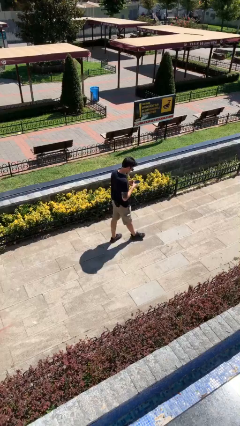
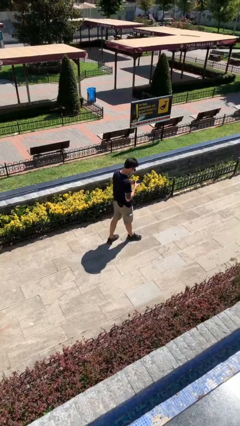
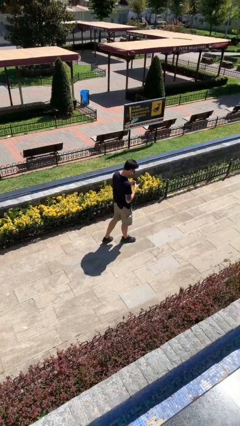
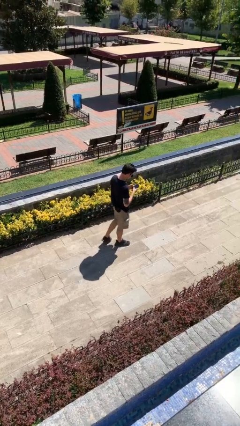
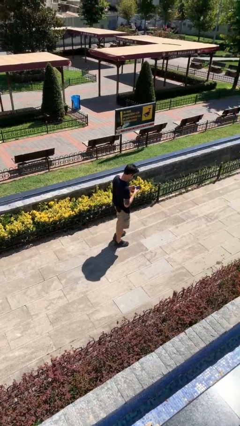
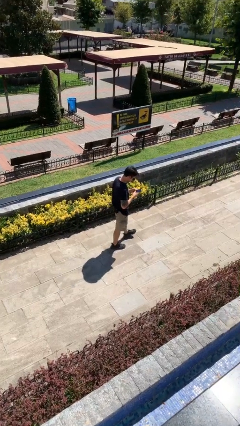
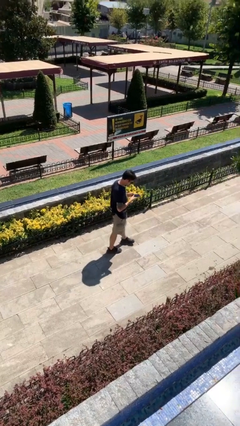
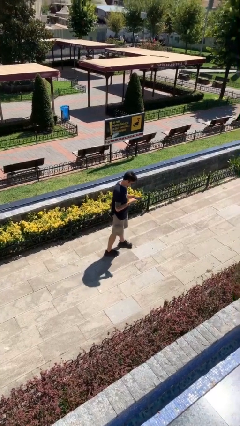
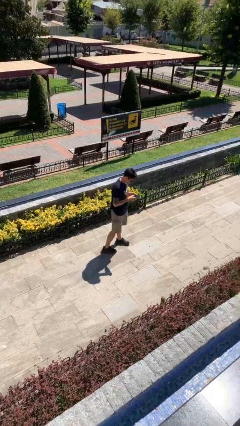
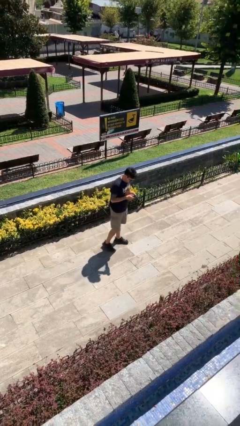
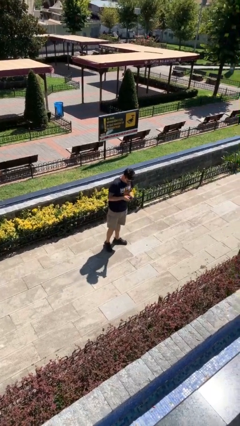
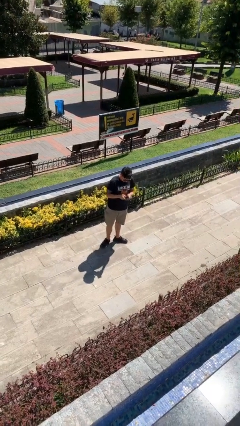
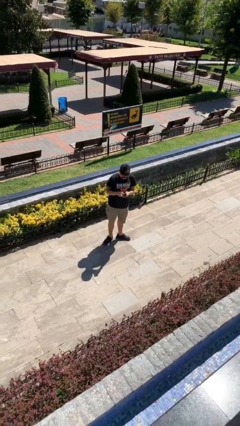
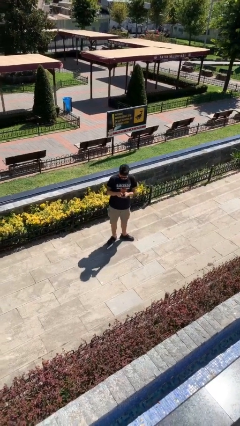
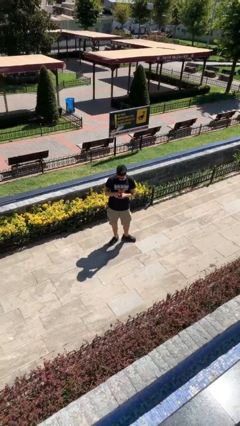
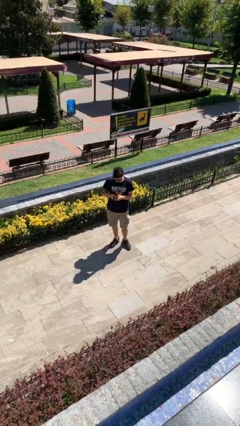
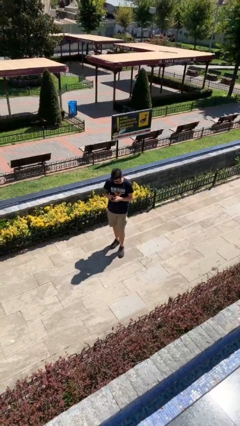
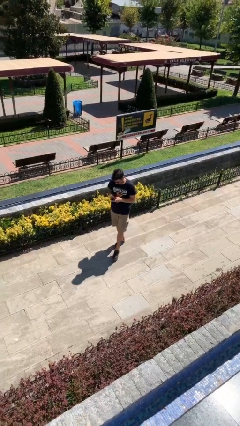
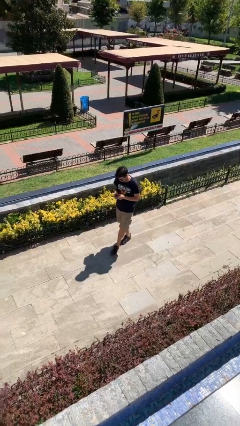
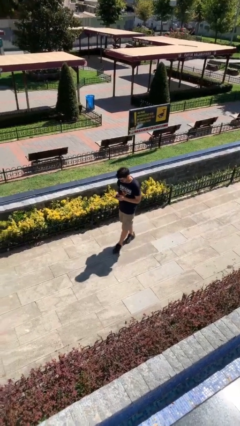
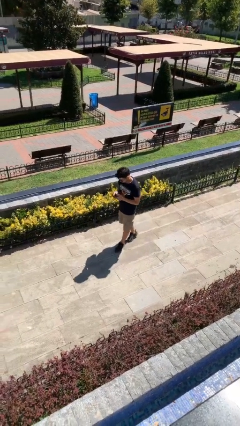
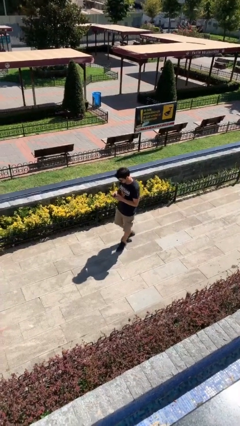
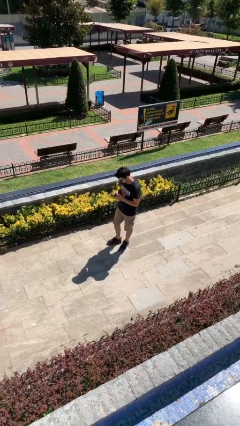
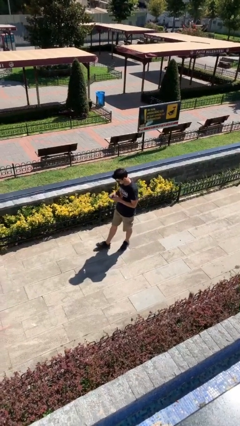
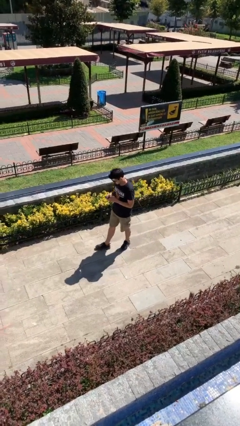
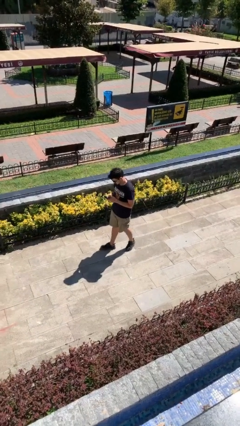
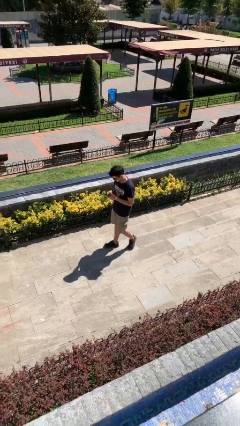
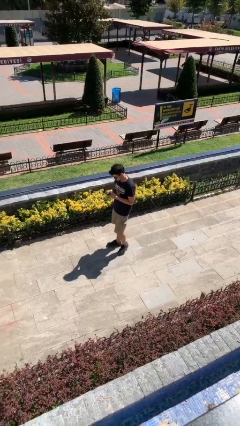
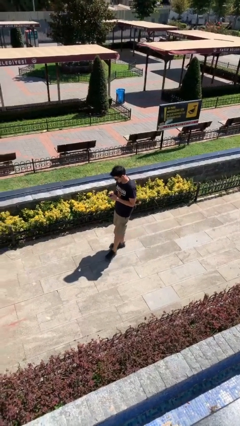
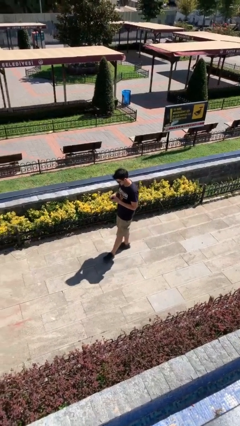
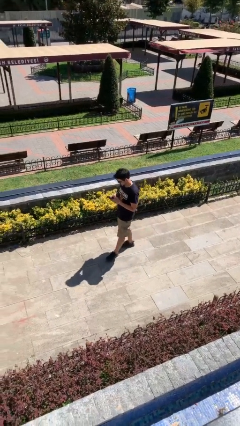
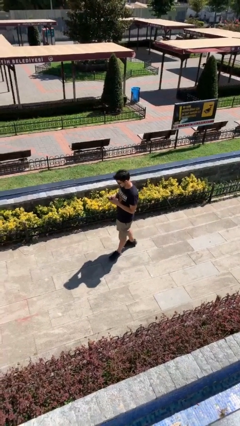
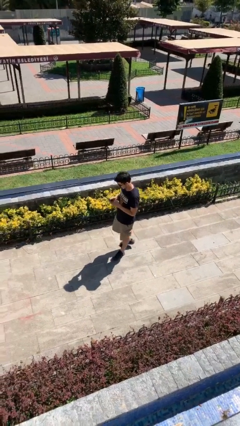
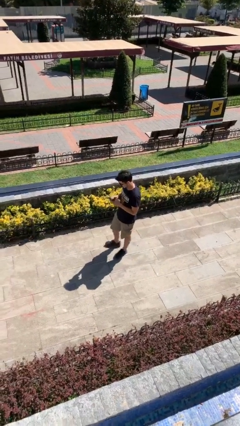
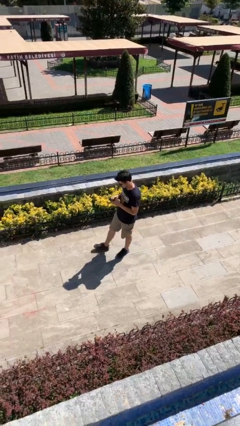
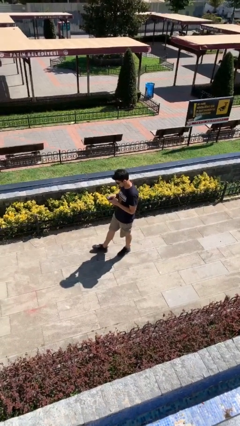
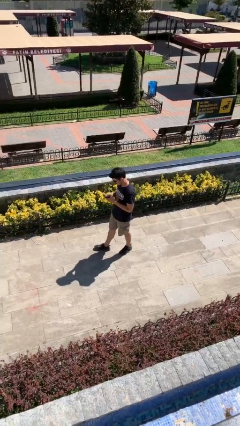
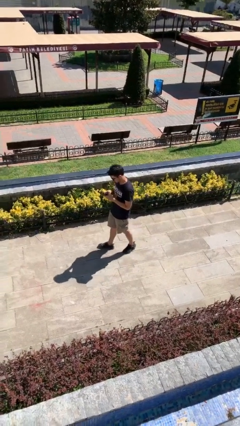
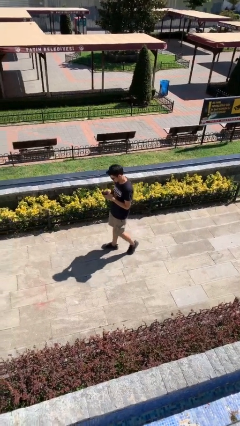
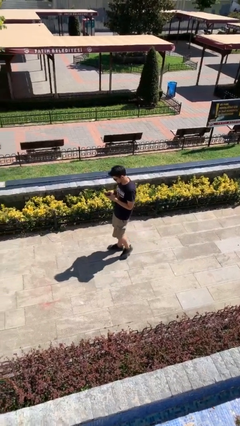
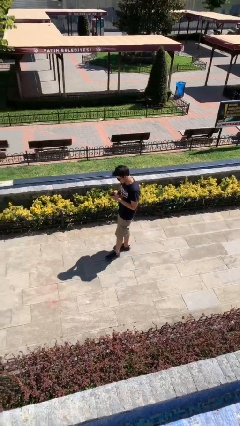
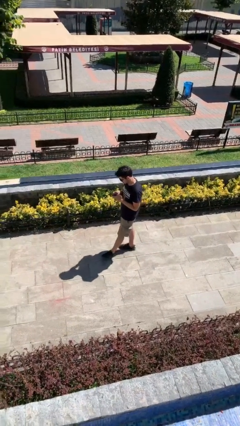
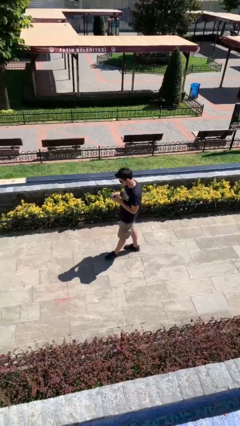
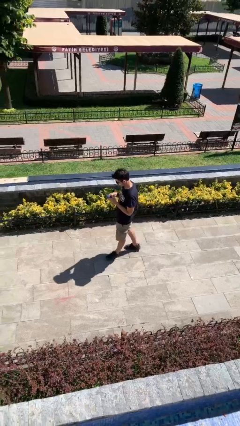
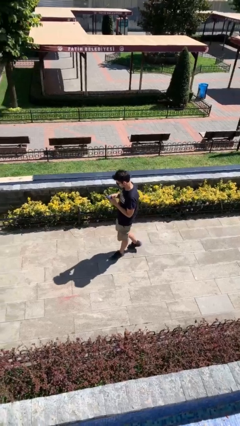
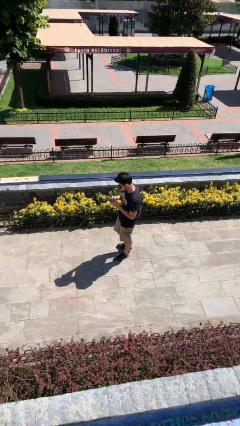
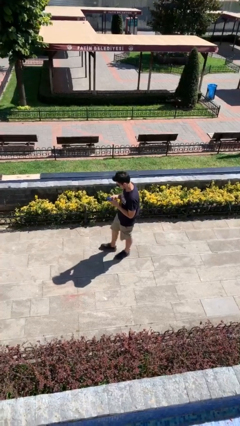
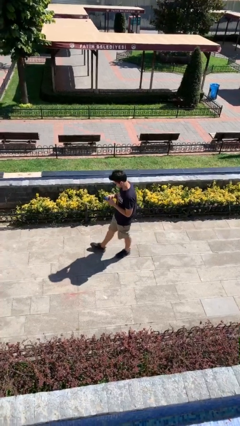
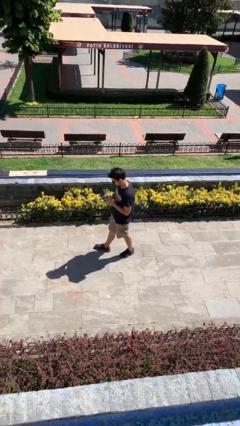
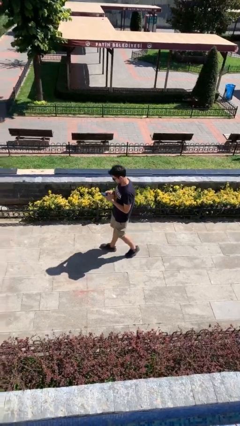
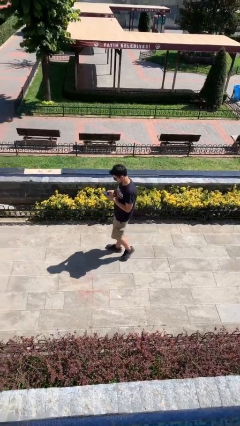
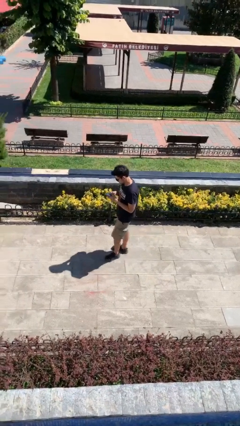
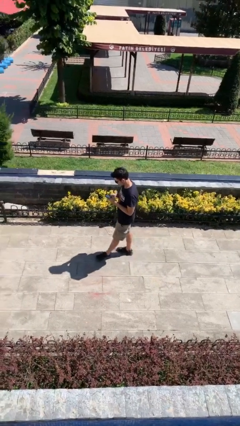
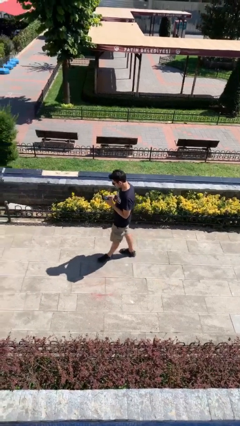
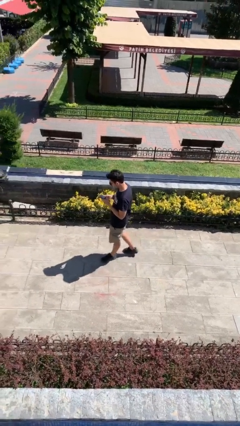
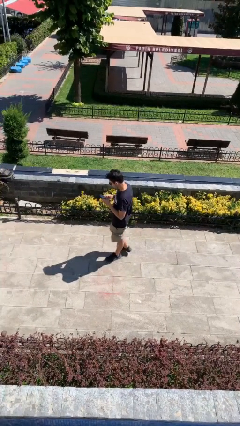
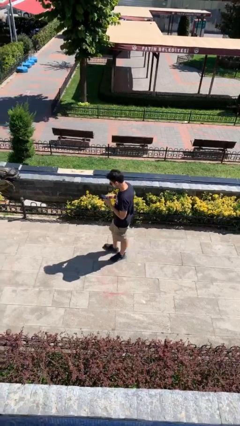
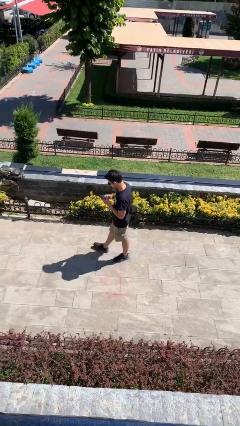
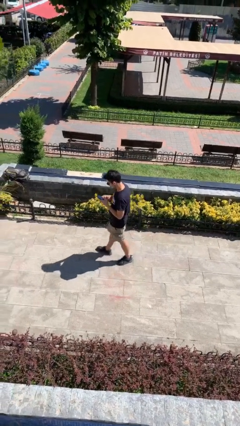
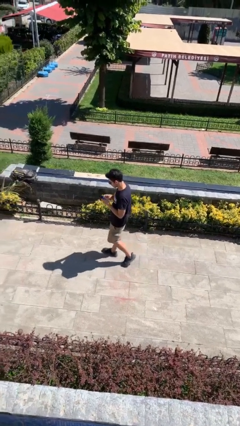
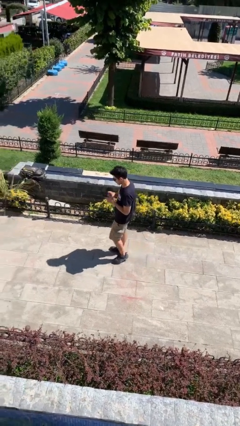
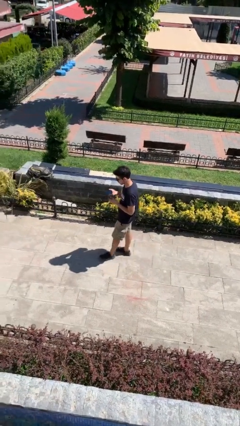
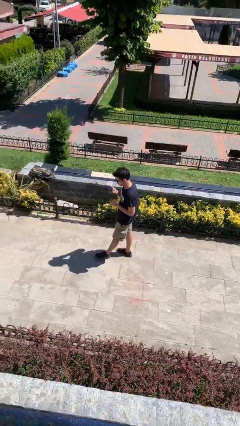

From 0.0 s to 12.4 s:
person texts on phone

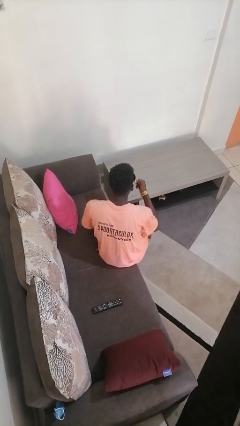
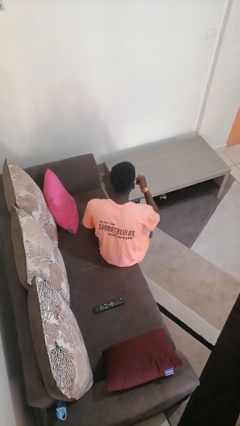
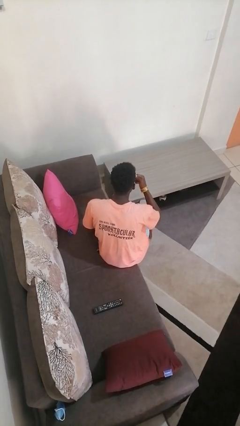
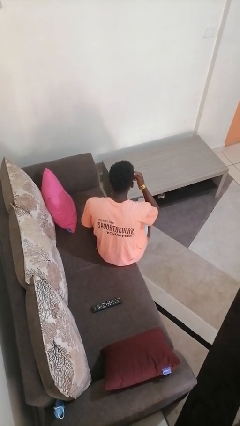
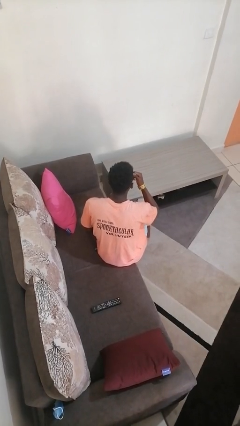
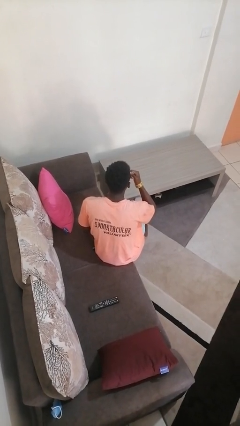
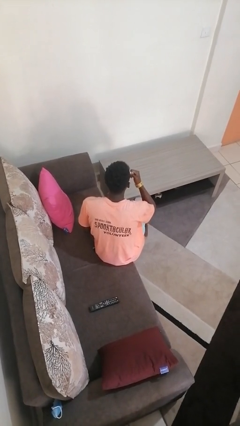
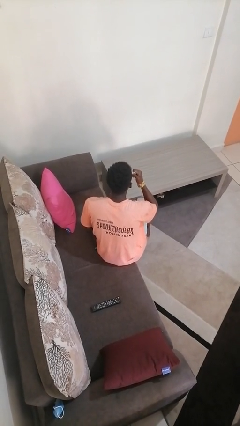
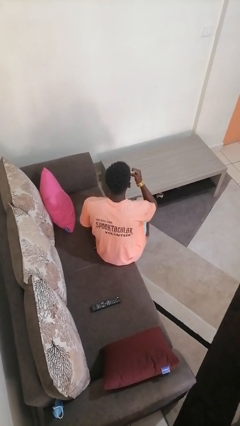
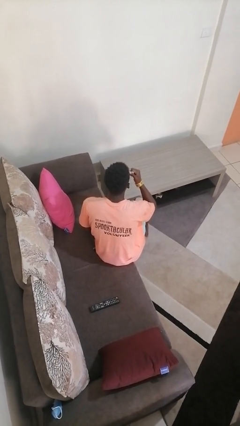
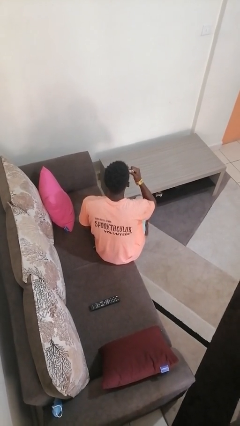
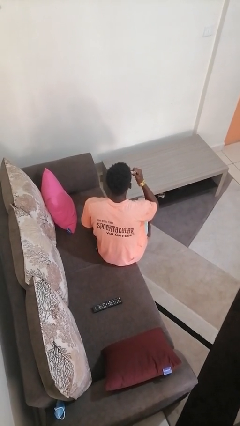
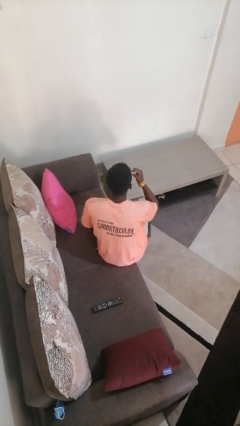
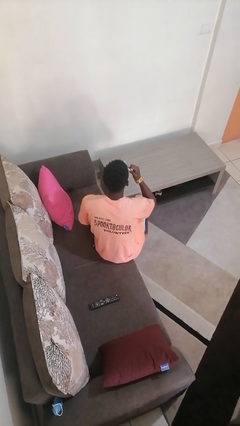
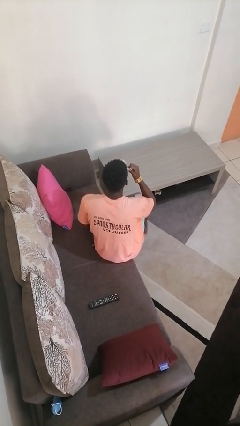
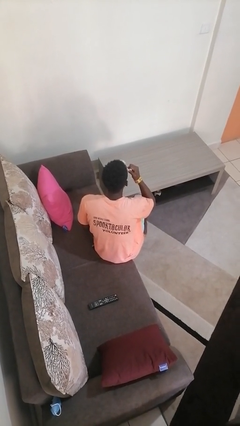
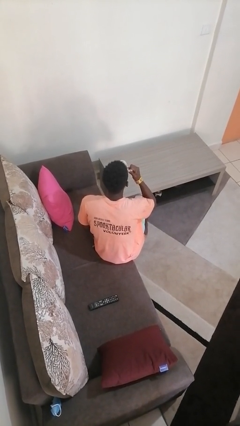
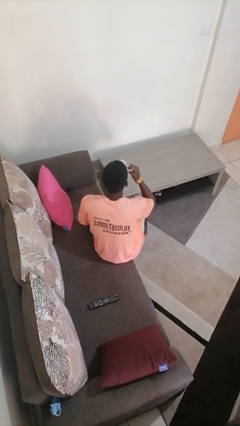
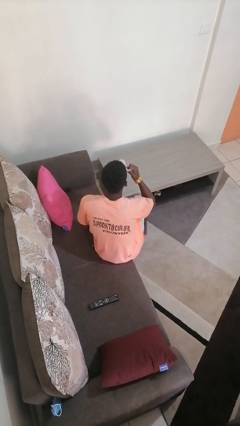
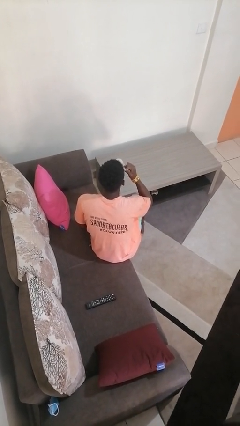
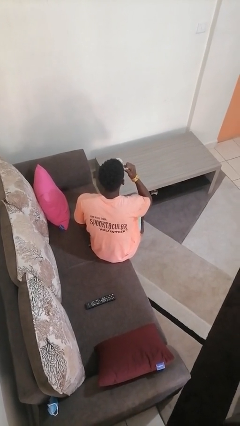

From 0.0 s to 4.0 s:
person drinks from mug

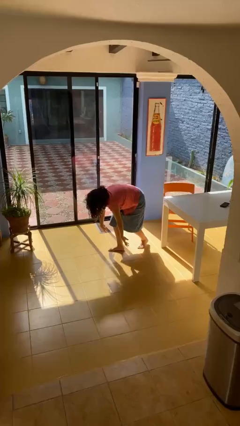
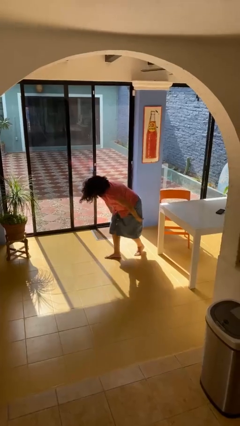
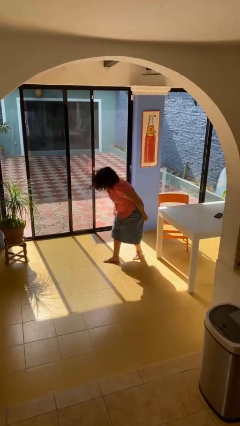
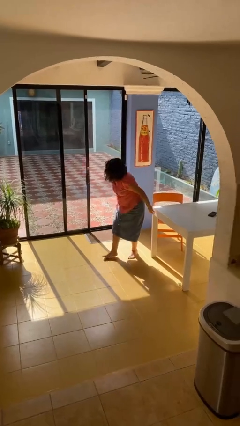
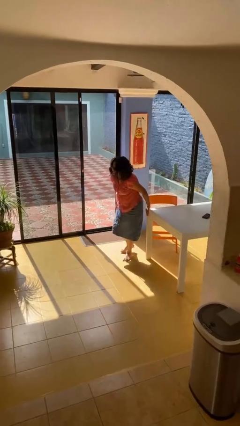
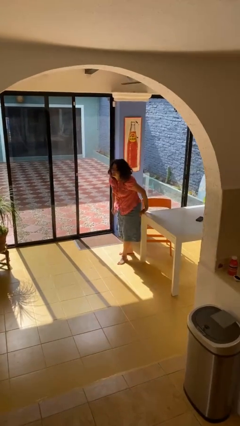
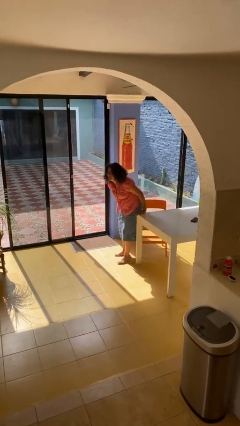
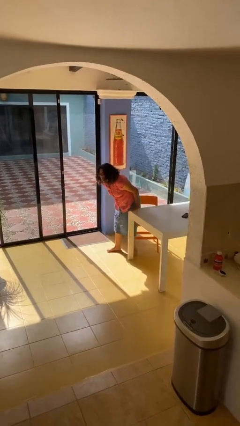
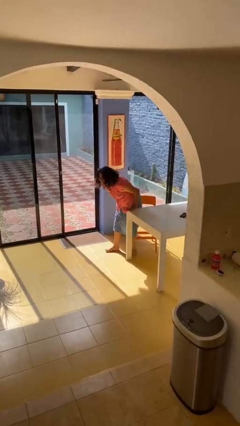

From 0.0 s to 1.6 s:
person stands up from floor
